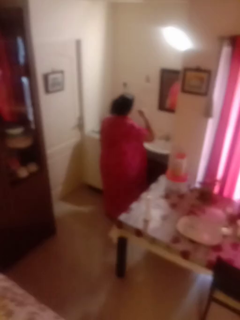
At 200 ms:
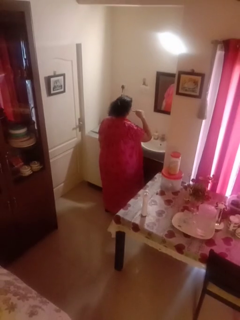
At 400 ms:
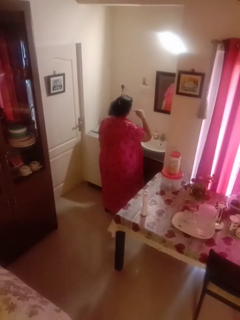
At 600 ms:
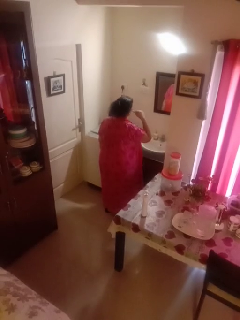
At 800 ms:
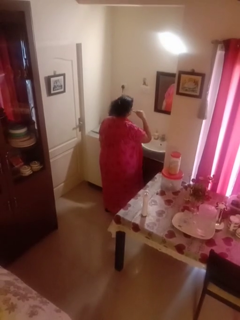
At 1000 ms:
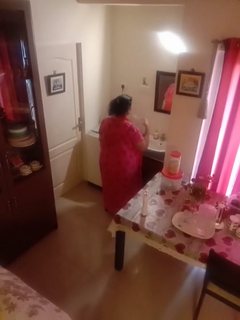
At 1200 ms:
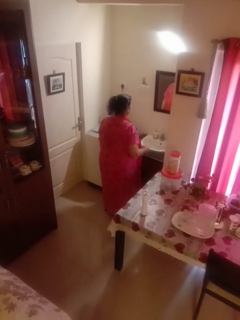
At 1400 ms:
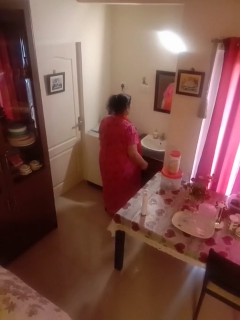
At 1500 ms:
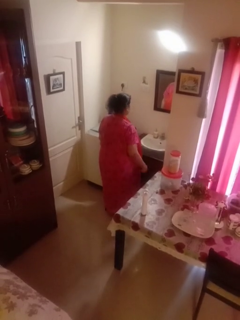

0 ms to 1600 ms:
person brushes teeth

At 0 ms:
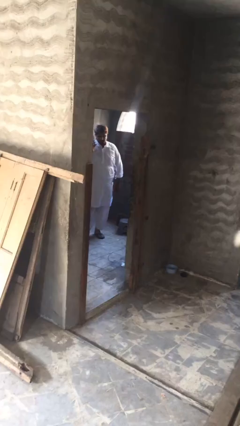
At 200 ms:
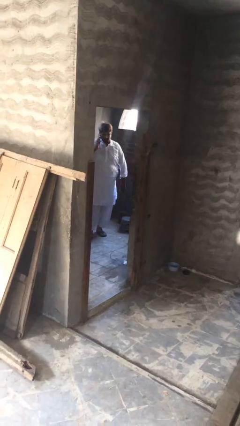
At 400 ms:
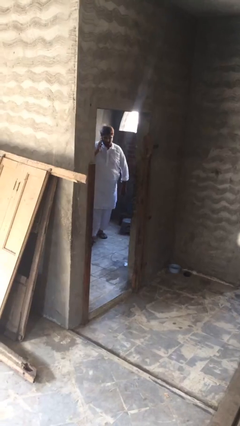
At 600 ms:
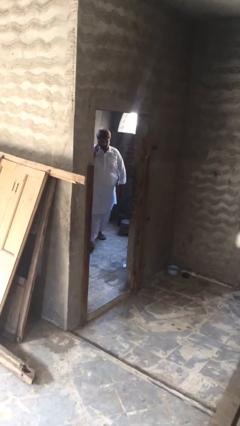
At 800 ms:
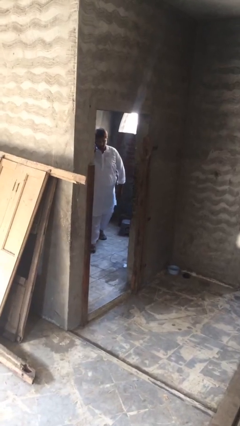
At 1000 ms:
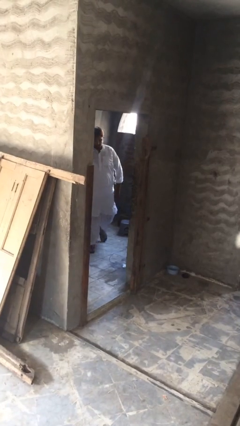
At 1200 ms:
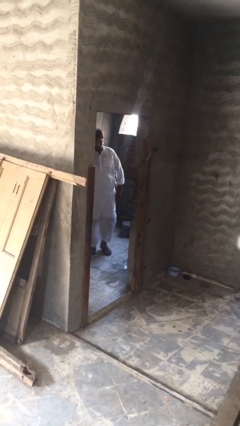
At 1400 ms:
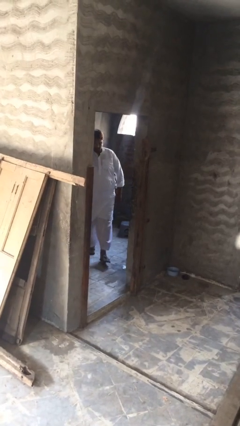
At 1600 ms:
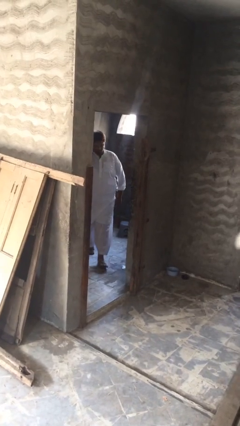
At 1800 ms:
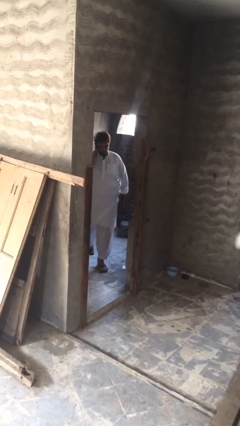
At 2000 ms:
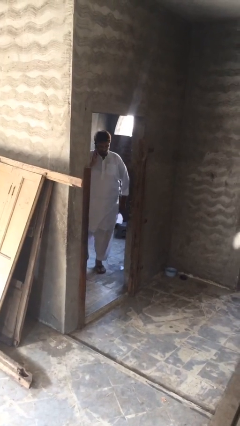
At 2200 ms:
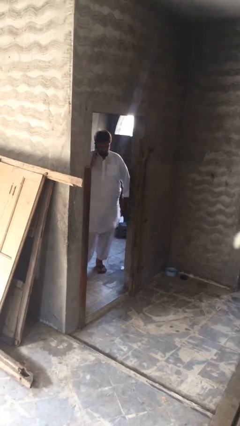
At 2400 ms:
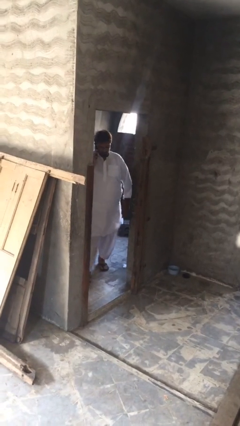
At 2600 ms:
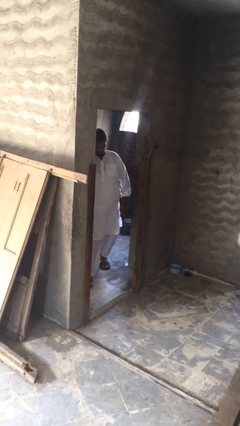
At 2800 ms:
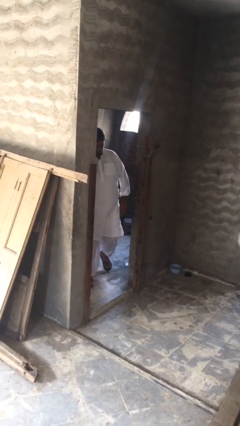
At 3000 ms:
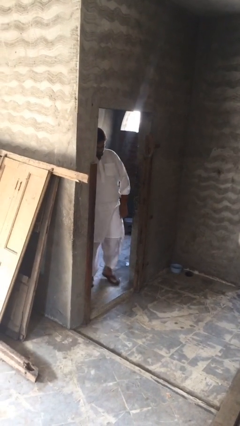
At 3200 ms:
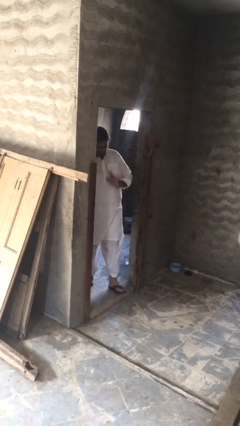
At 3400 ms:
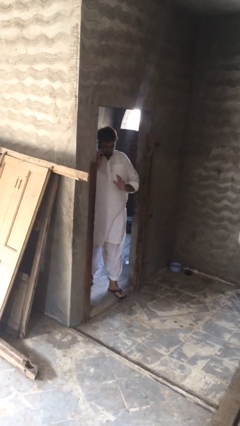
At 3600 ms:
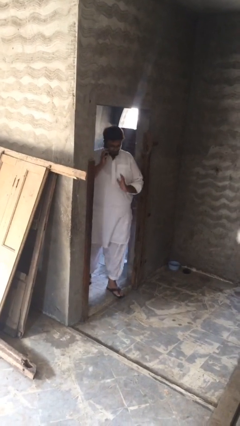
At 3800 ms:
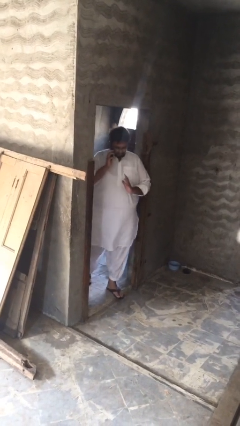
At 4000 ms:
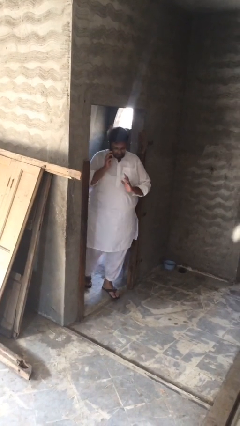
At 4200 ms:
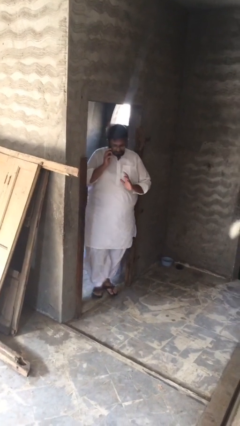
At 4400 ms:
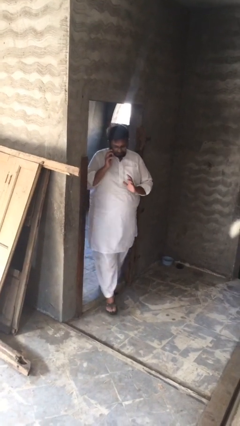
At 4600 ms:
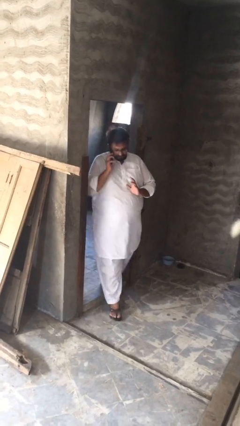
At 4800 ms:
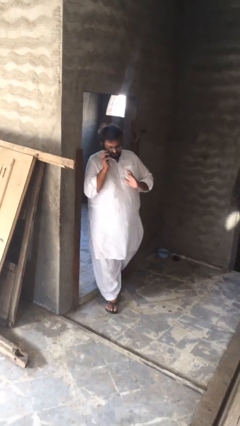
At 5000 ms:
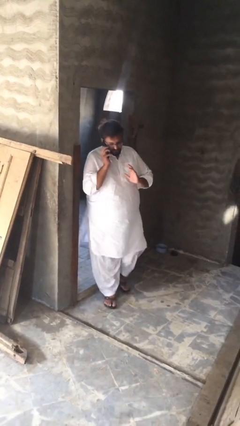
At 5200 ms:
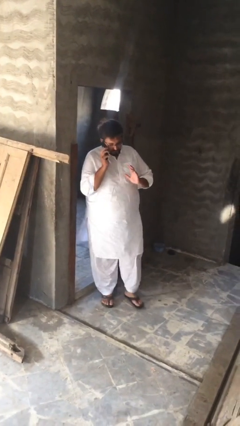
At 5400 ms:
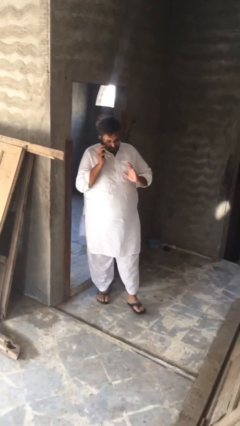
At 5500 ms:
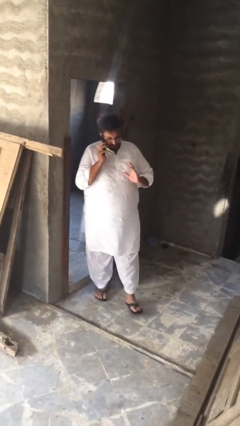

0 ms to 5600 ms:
person enters scene through structure

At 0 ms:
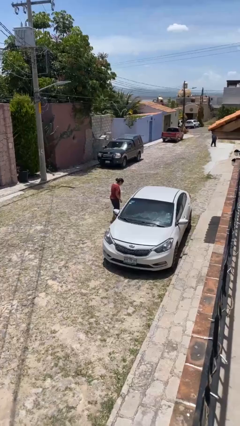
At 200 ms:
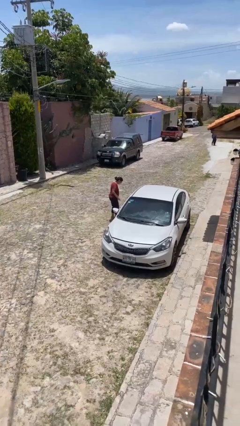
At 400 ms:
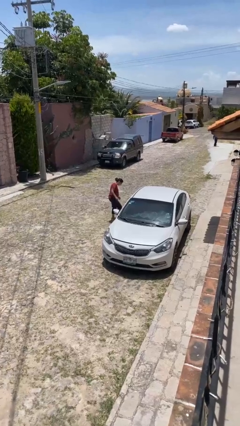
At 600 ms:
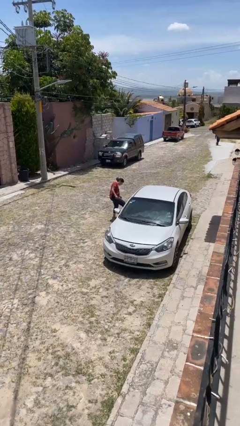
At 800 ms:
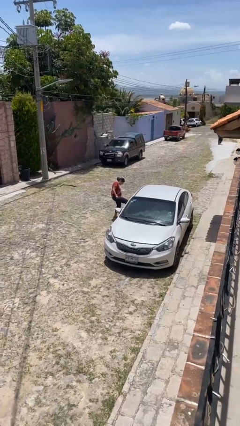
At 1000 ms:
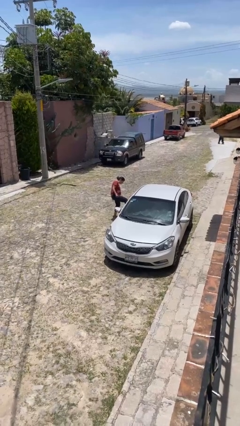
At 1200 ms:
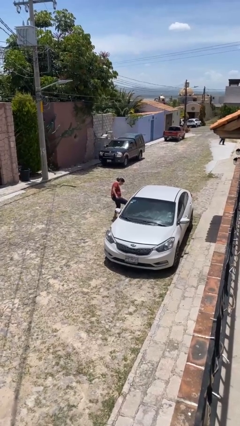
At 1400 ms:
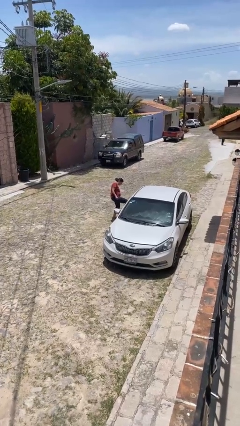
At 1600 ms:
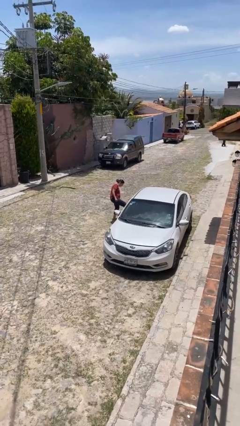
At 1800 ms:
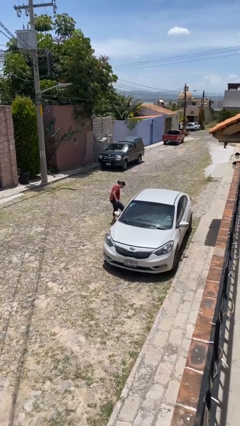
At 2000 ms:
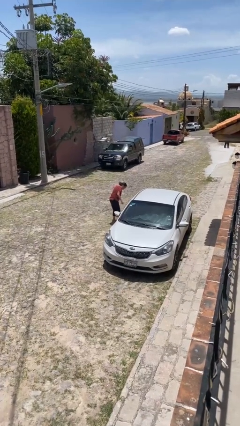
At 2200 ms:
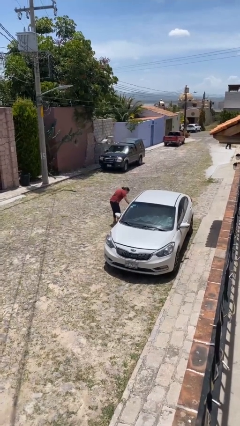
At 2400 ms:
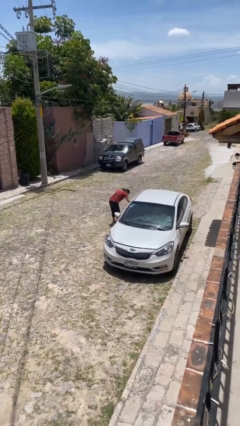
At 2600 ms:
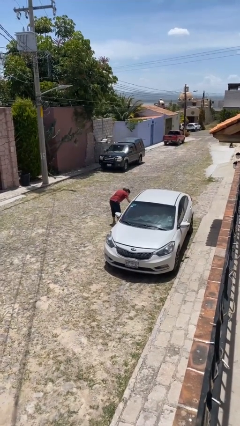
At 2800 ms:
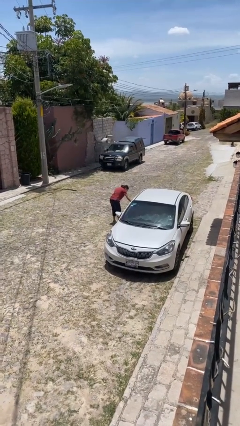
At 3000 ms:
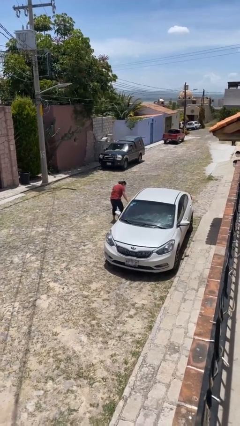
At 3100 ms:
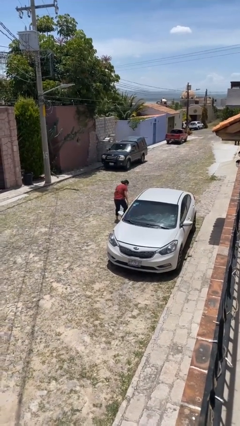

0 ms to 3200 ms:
person kicks car tires

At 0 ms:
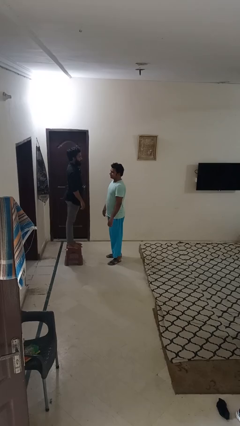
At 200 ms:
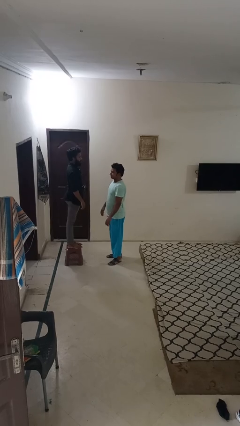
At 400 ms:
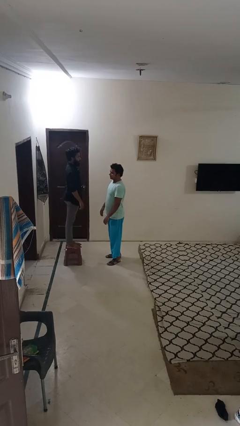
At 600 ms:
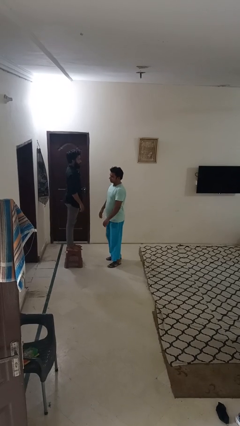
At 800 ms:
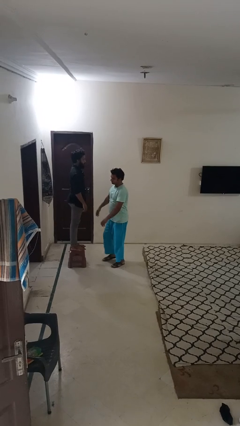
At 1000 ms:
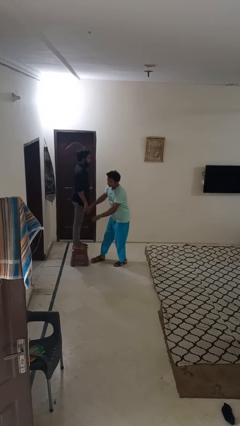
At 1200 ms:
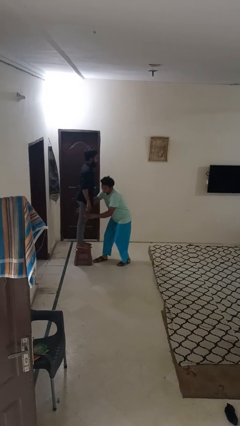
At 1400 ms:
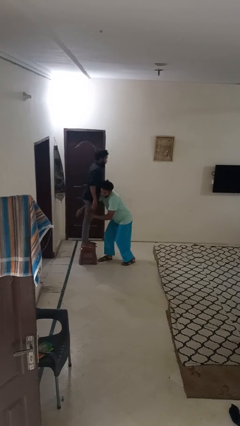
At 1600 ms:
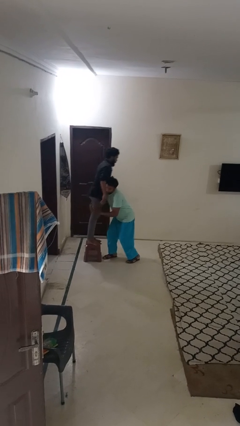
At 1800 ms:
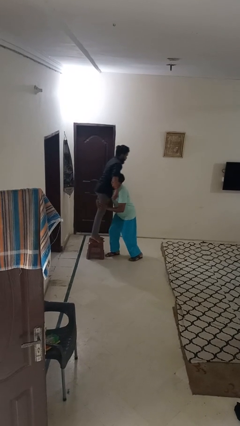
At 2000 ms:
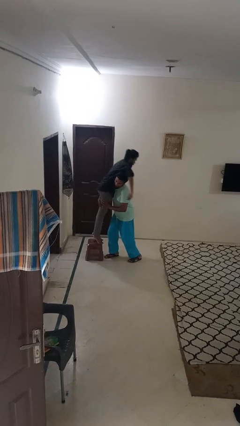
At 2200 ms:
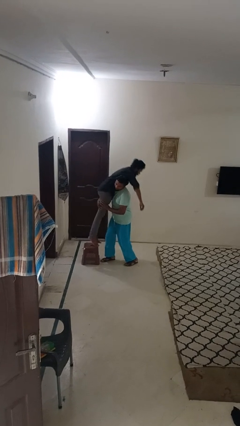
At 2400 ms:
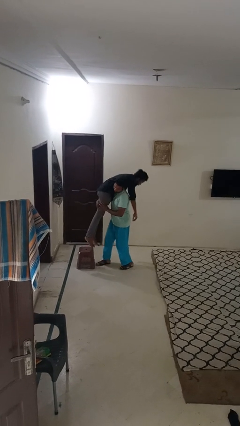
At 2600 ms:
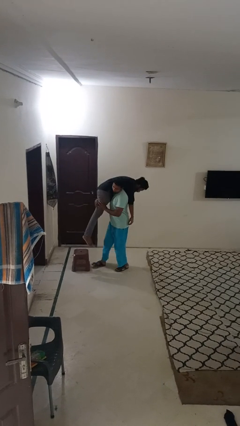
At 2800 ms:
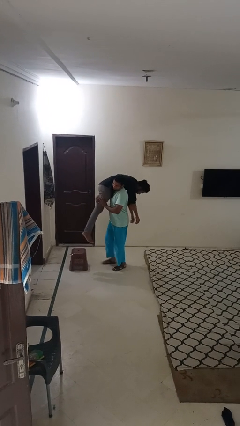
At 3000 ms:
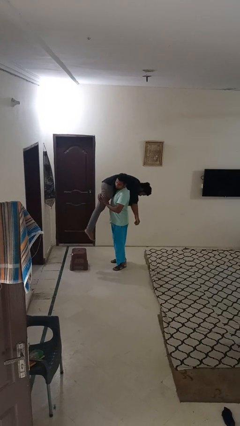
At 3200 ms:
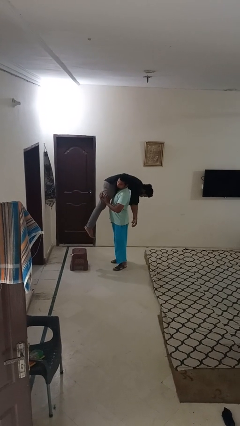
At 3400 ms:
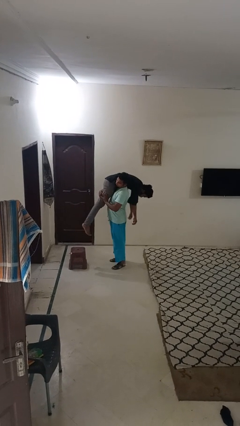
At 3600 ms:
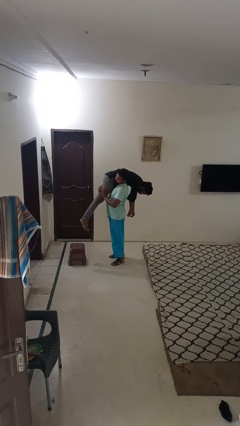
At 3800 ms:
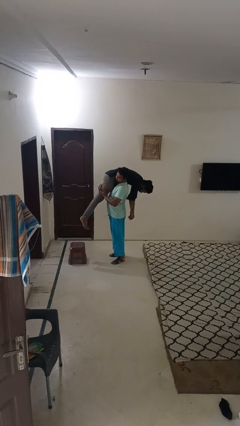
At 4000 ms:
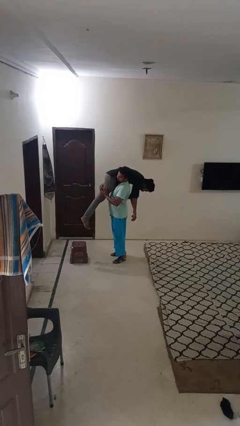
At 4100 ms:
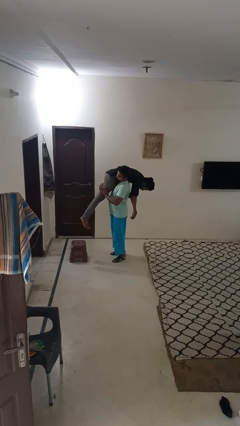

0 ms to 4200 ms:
person carries person over shoulder

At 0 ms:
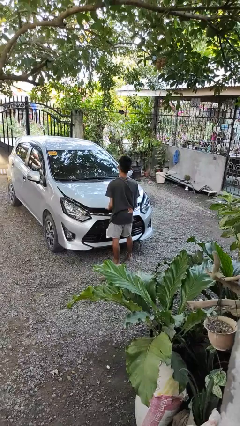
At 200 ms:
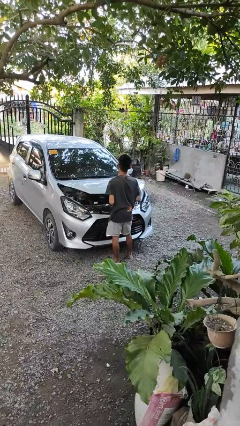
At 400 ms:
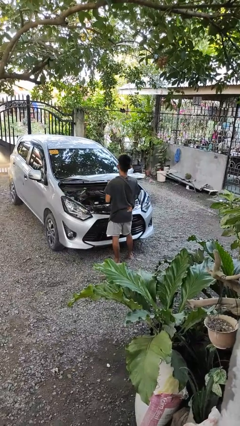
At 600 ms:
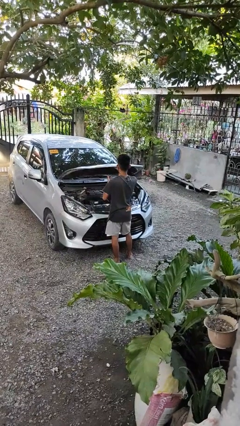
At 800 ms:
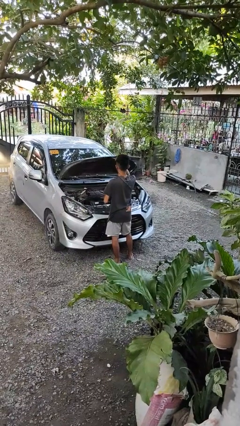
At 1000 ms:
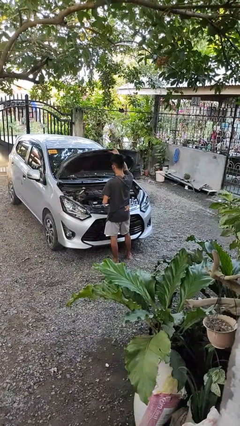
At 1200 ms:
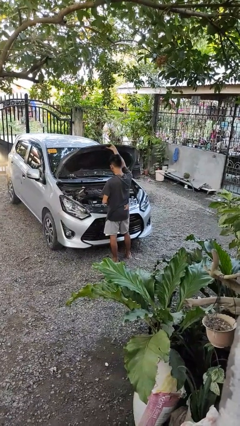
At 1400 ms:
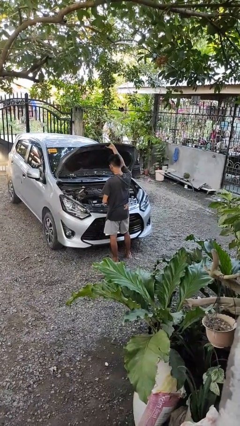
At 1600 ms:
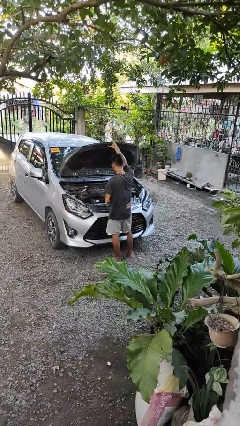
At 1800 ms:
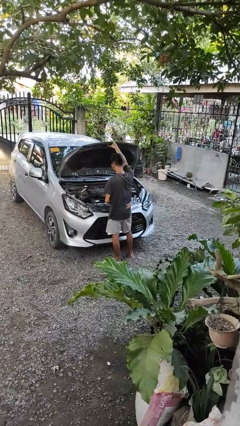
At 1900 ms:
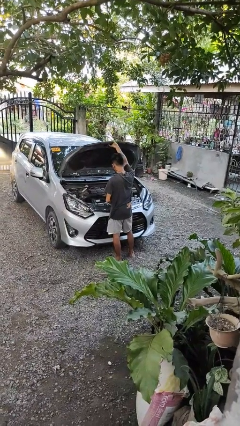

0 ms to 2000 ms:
person opens car hood

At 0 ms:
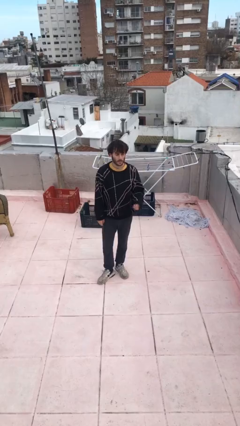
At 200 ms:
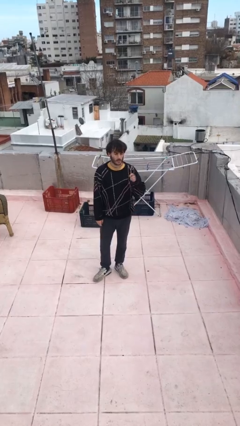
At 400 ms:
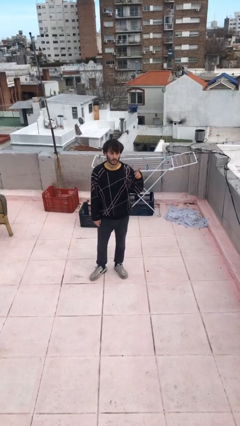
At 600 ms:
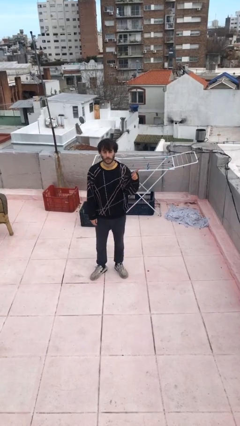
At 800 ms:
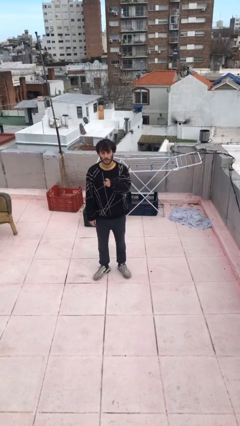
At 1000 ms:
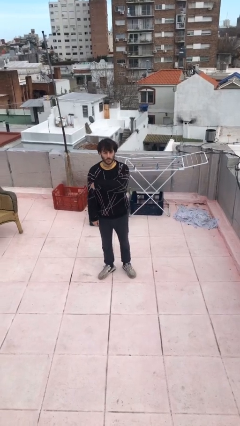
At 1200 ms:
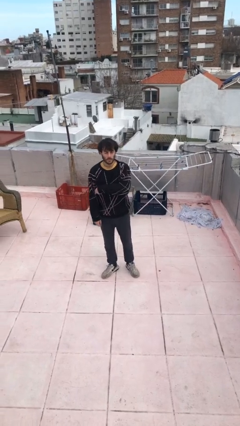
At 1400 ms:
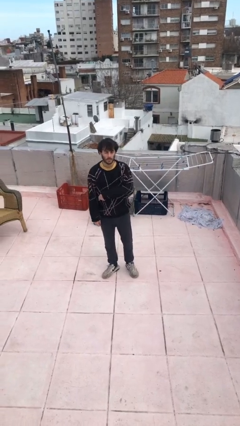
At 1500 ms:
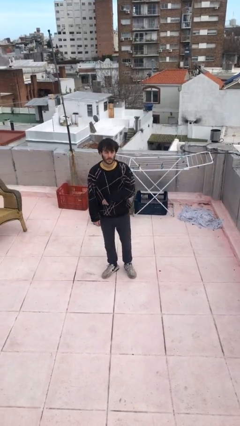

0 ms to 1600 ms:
person gestures swipe right
